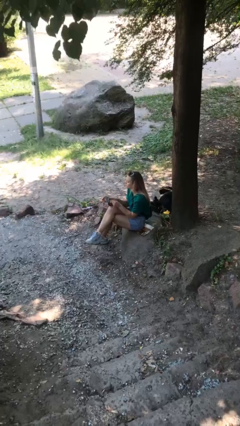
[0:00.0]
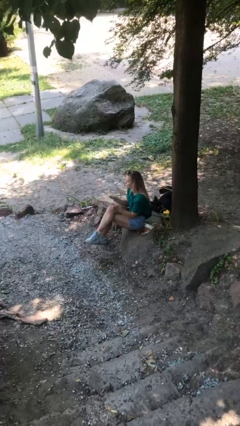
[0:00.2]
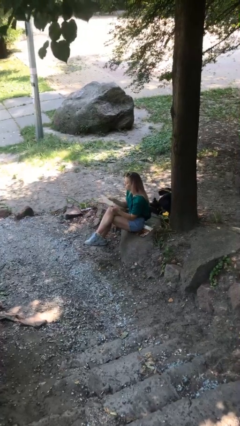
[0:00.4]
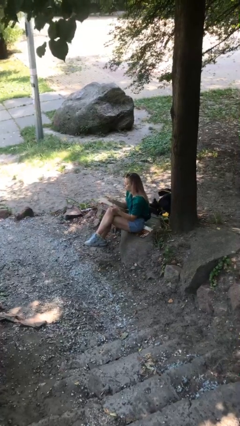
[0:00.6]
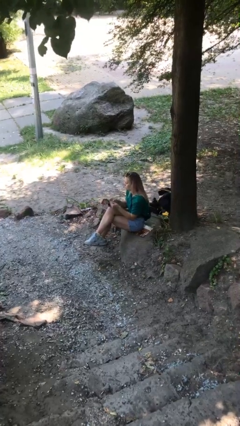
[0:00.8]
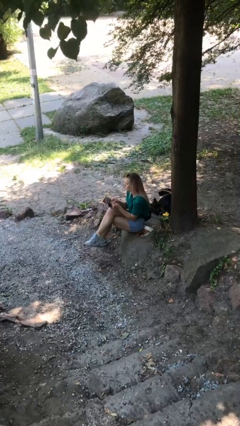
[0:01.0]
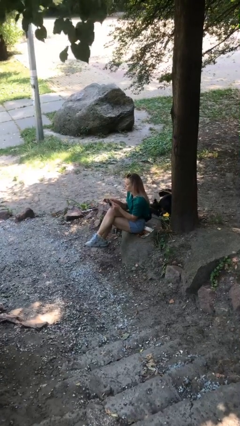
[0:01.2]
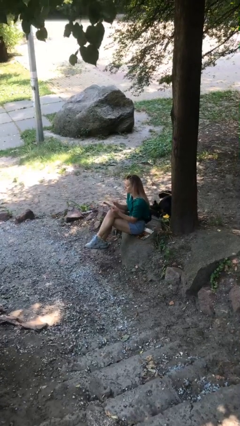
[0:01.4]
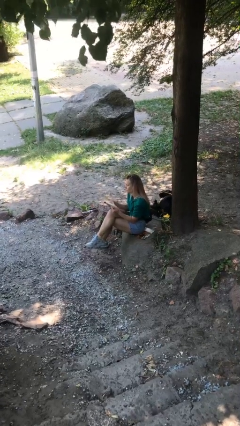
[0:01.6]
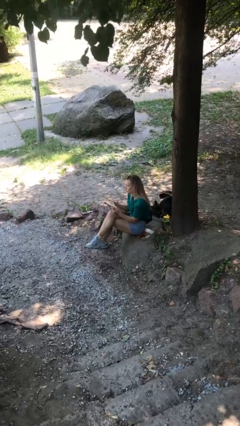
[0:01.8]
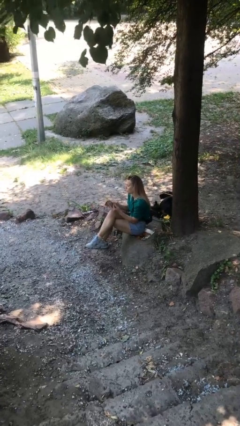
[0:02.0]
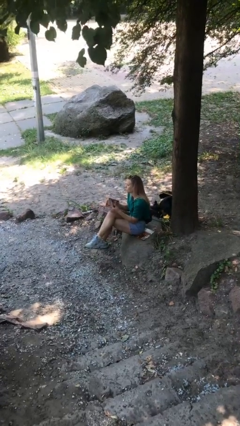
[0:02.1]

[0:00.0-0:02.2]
person reads book

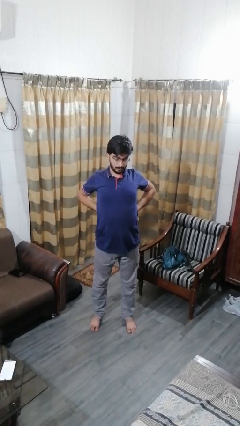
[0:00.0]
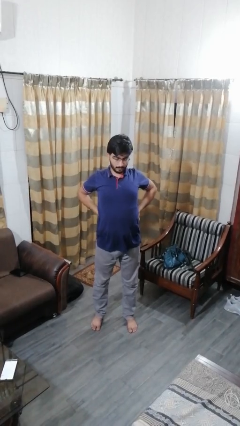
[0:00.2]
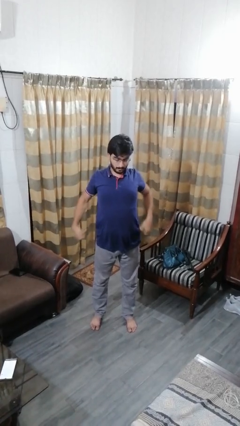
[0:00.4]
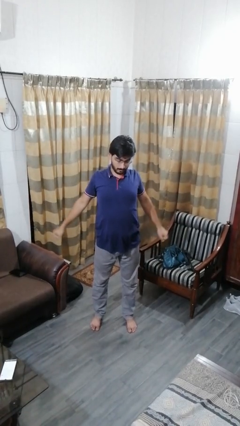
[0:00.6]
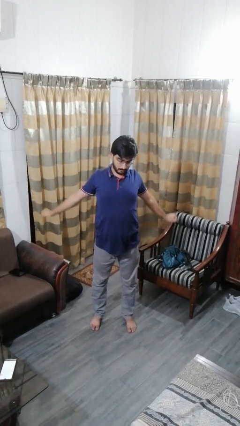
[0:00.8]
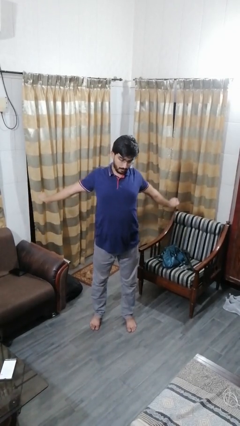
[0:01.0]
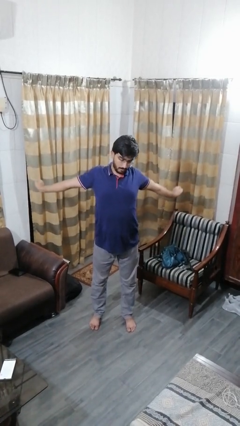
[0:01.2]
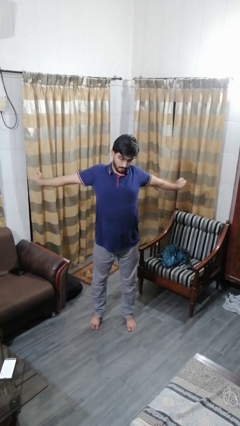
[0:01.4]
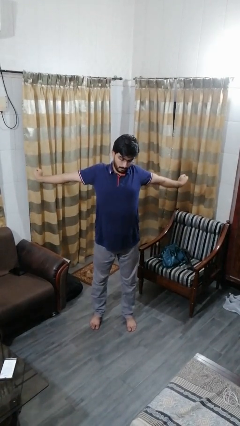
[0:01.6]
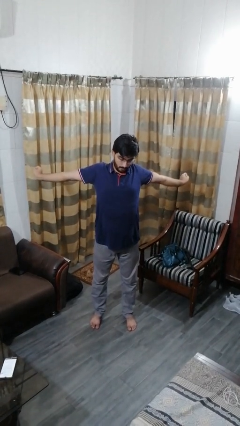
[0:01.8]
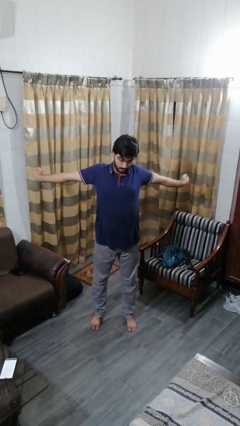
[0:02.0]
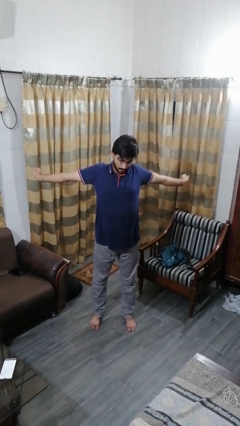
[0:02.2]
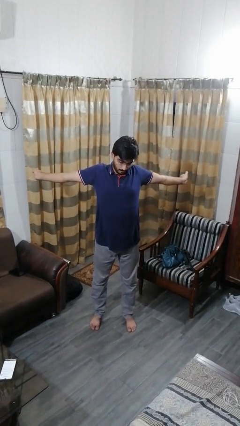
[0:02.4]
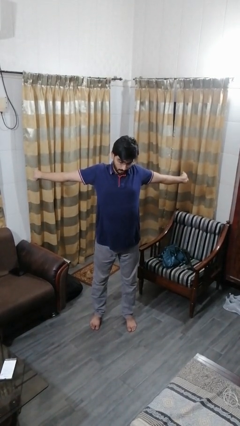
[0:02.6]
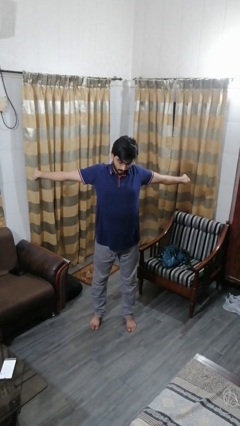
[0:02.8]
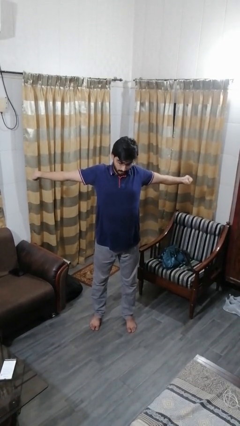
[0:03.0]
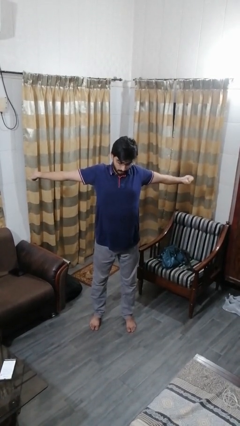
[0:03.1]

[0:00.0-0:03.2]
person stretches arms to side

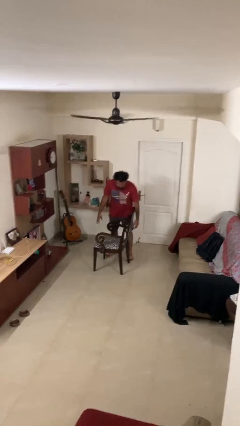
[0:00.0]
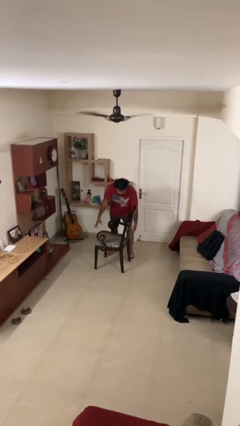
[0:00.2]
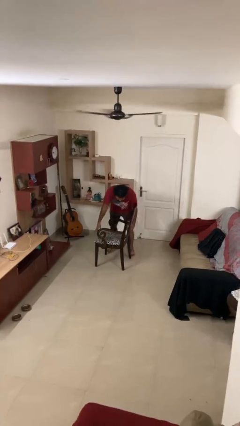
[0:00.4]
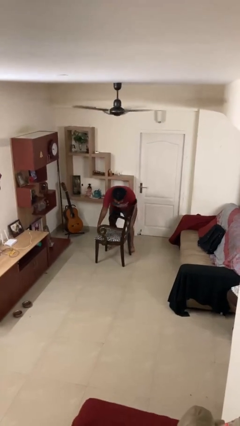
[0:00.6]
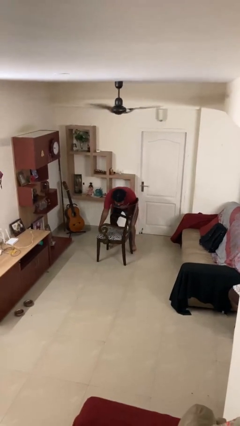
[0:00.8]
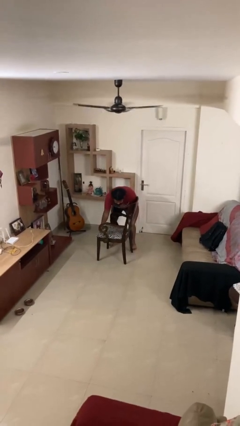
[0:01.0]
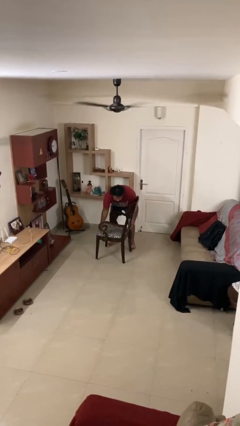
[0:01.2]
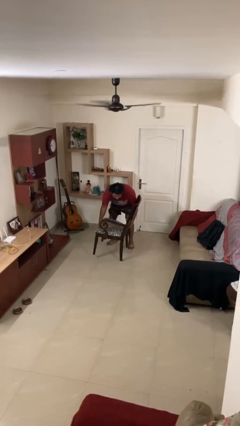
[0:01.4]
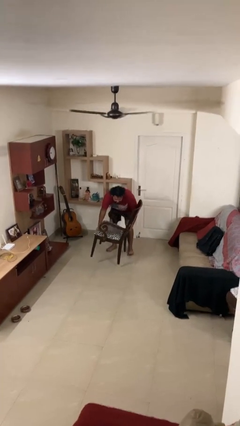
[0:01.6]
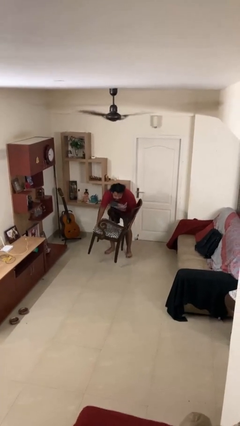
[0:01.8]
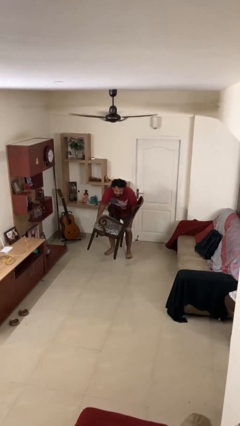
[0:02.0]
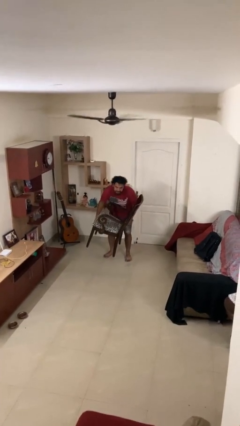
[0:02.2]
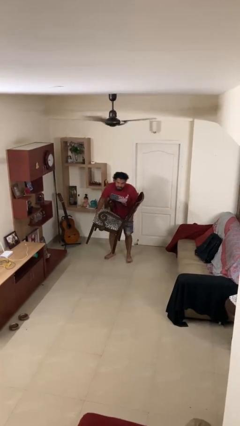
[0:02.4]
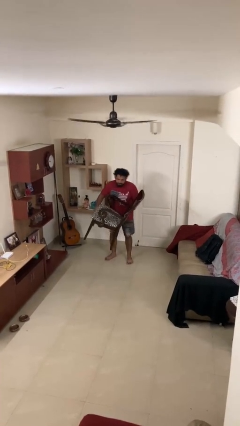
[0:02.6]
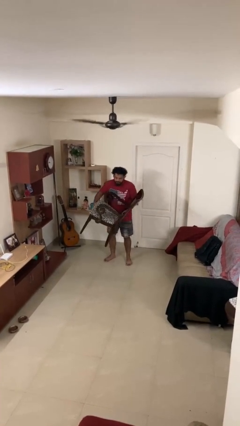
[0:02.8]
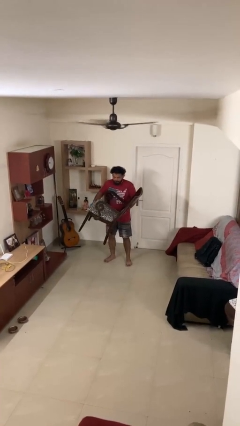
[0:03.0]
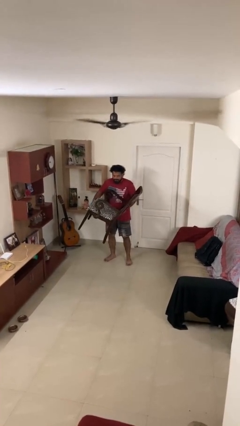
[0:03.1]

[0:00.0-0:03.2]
person picks up object from floor

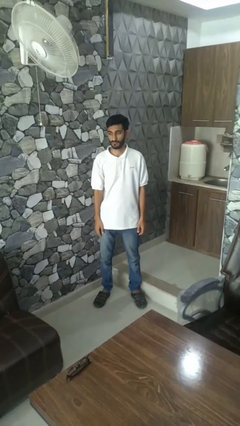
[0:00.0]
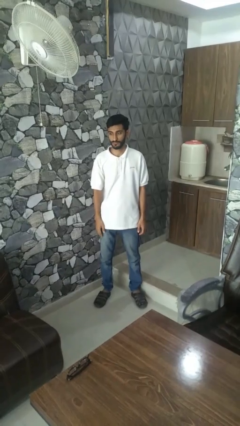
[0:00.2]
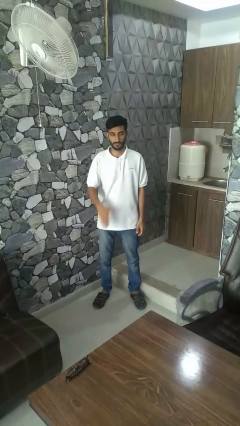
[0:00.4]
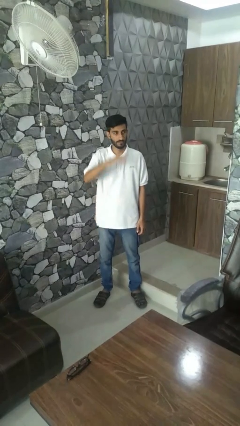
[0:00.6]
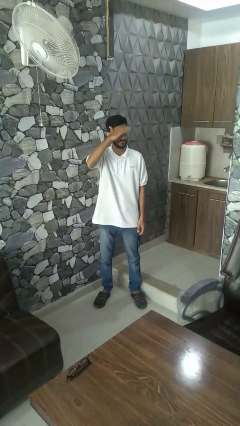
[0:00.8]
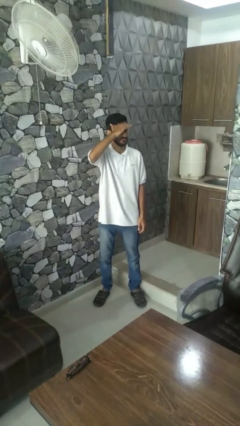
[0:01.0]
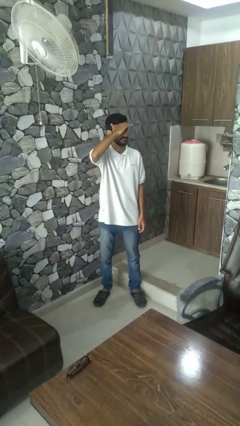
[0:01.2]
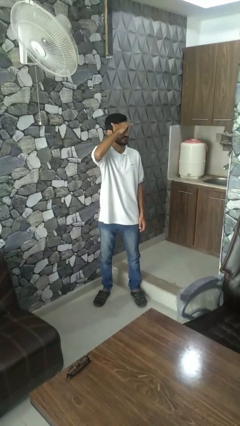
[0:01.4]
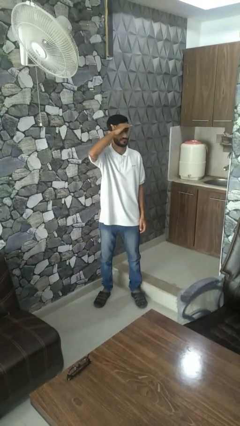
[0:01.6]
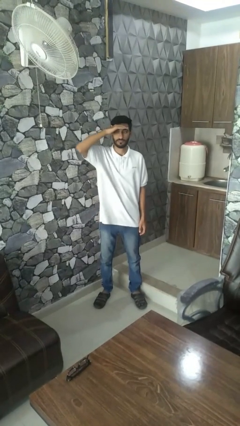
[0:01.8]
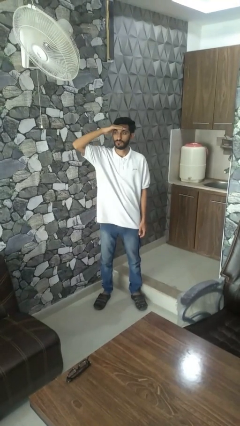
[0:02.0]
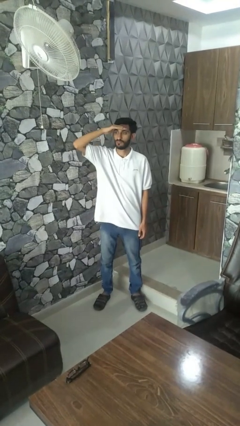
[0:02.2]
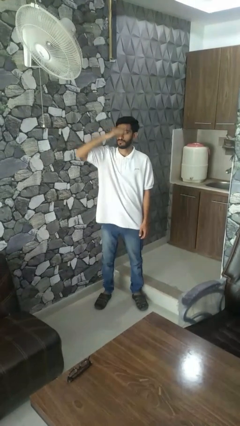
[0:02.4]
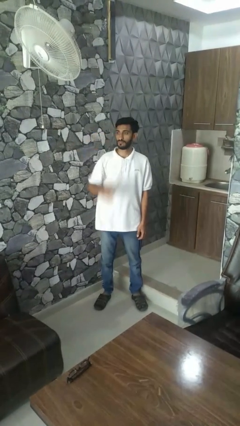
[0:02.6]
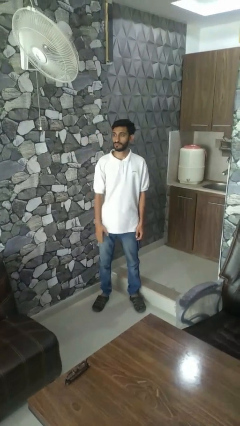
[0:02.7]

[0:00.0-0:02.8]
person shades eyes

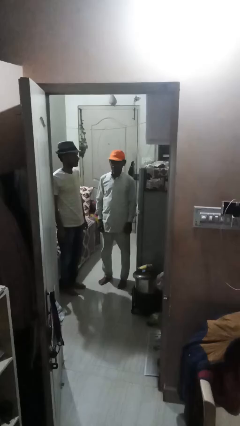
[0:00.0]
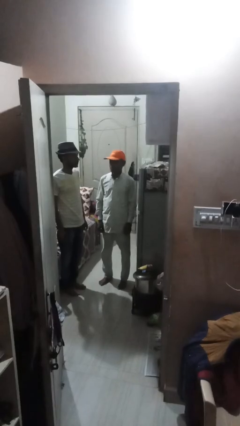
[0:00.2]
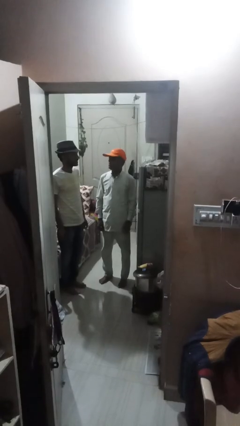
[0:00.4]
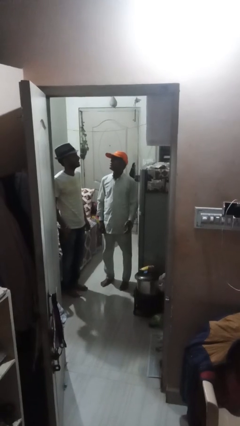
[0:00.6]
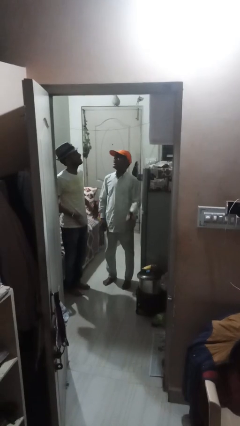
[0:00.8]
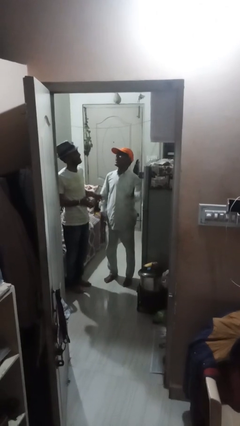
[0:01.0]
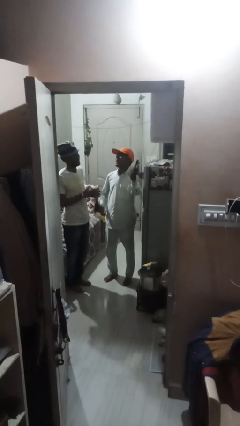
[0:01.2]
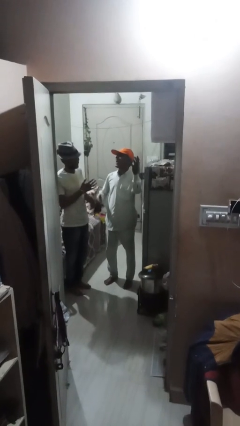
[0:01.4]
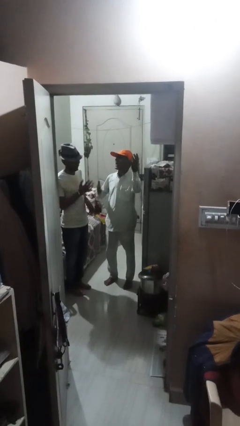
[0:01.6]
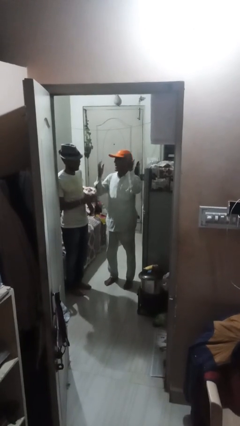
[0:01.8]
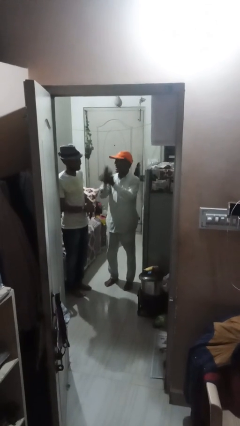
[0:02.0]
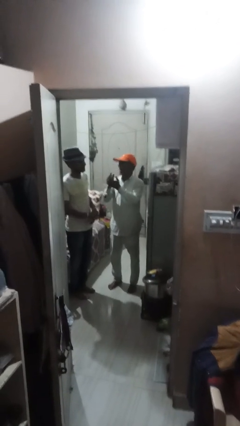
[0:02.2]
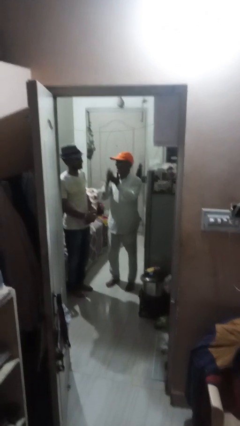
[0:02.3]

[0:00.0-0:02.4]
person laughs with person

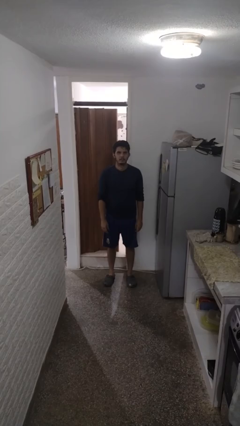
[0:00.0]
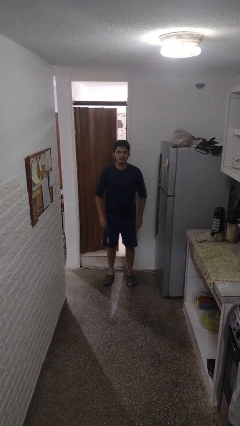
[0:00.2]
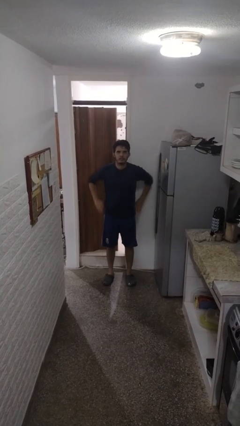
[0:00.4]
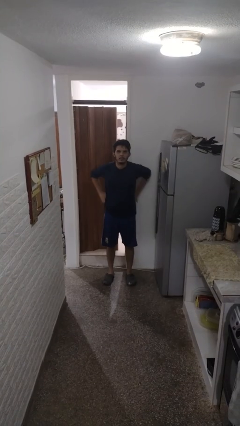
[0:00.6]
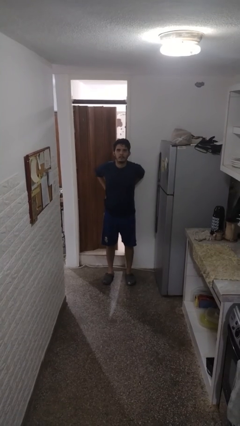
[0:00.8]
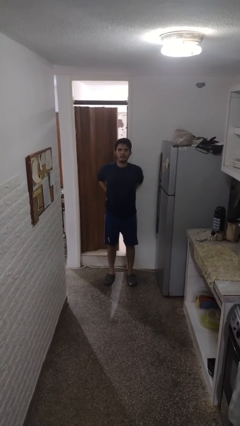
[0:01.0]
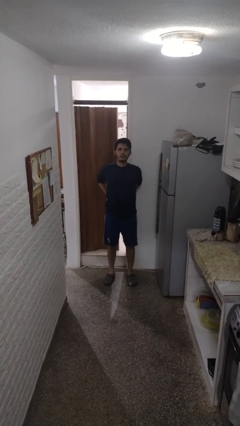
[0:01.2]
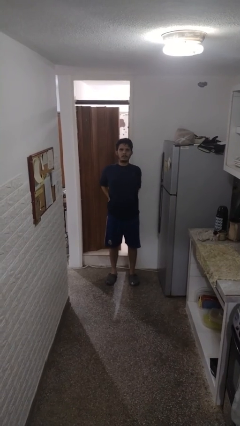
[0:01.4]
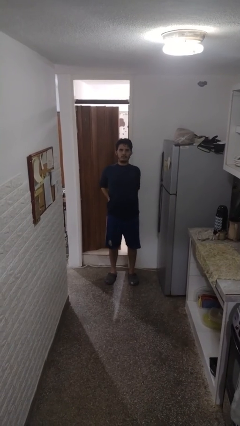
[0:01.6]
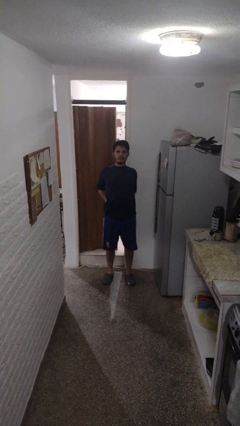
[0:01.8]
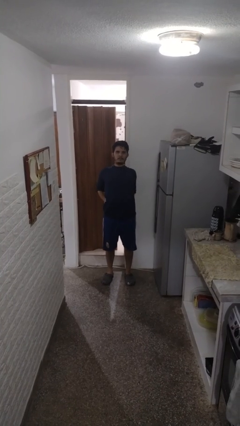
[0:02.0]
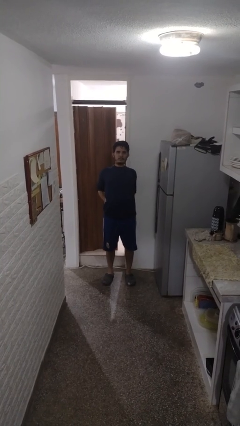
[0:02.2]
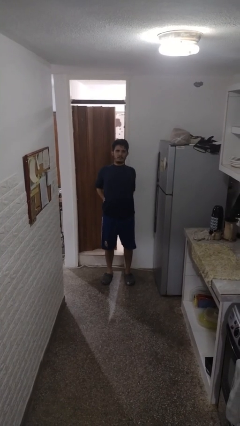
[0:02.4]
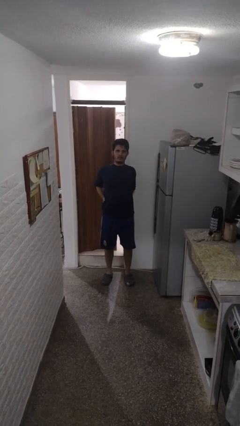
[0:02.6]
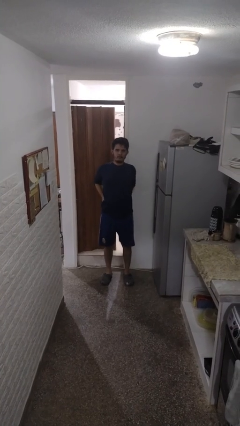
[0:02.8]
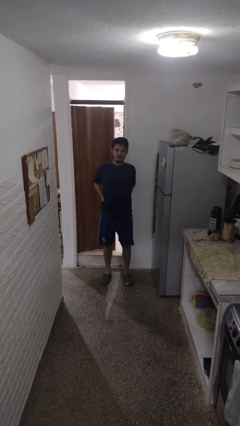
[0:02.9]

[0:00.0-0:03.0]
person stretches back

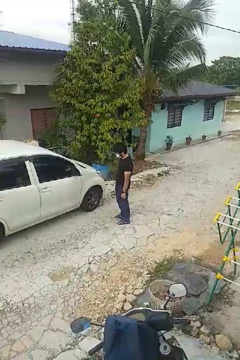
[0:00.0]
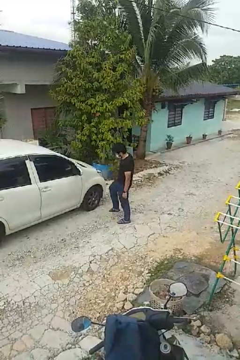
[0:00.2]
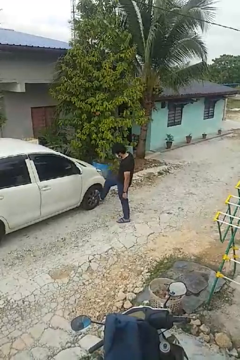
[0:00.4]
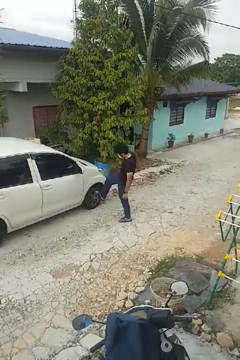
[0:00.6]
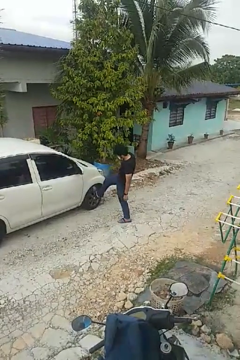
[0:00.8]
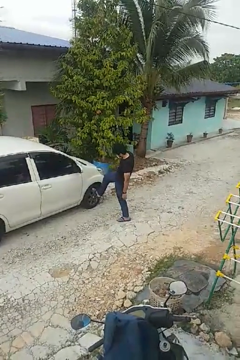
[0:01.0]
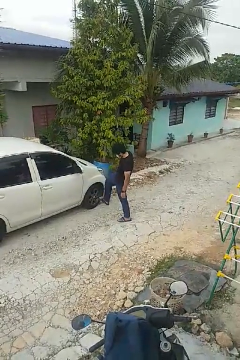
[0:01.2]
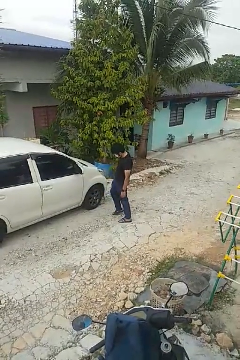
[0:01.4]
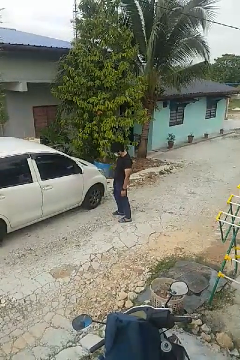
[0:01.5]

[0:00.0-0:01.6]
person kicks car tires
